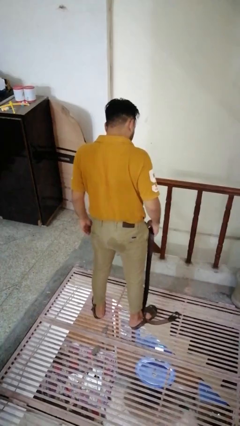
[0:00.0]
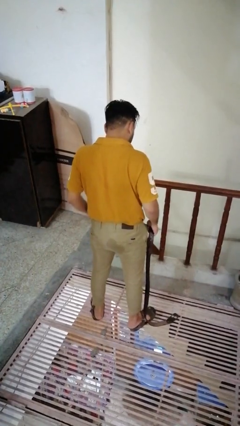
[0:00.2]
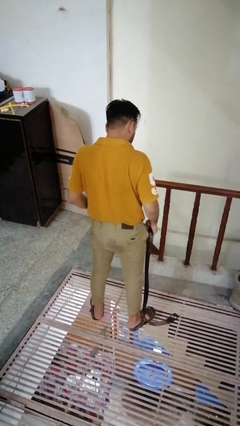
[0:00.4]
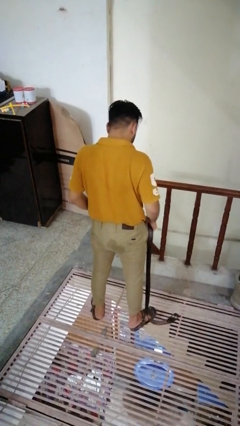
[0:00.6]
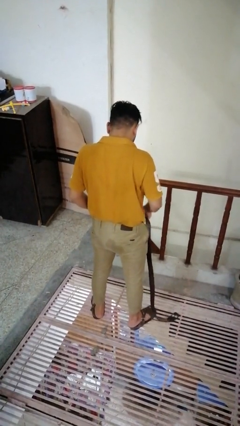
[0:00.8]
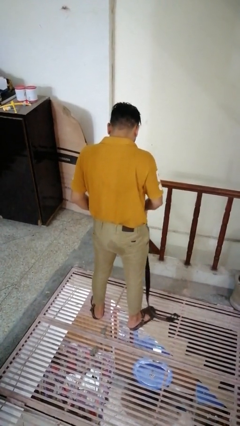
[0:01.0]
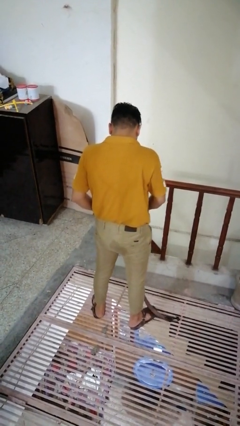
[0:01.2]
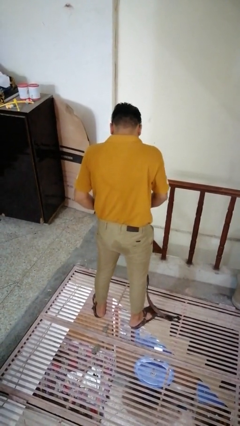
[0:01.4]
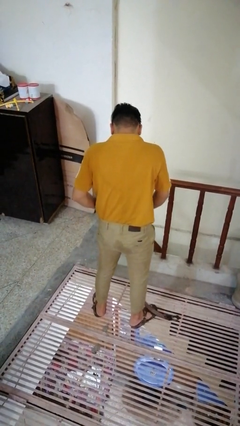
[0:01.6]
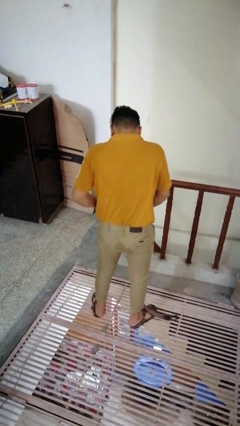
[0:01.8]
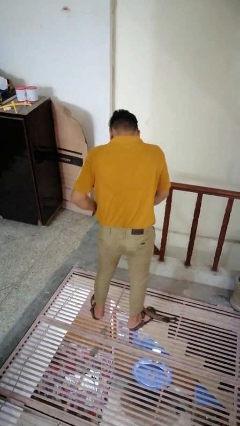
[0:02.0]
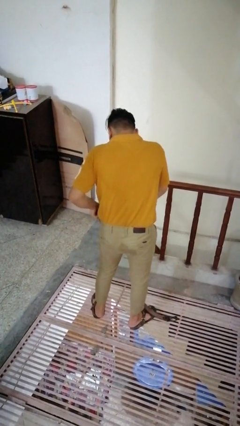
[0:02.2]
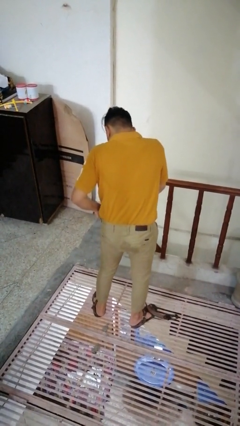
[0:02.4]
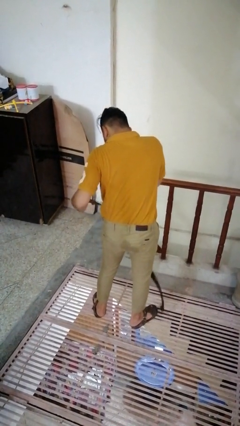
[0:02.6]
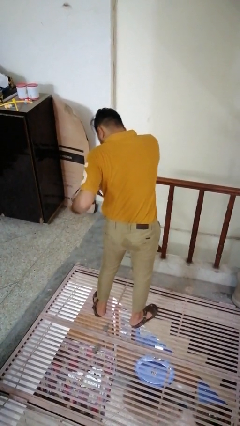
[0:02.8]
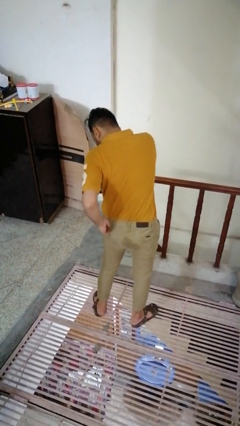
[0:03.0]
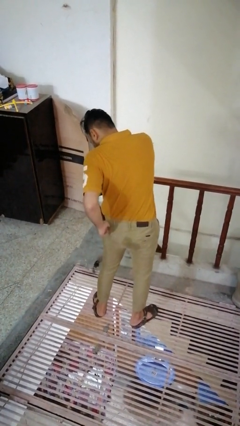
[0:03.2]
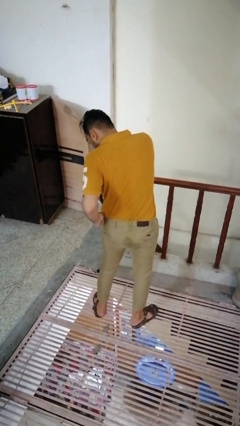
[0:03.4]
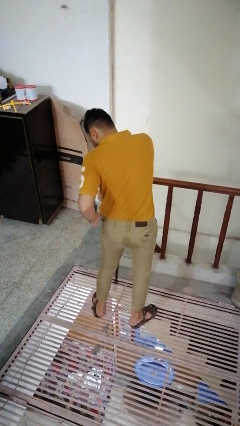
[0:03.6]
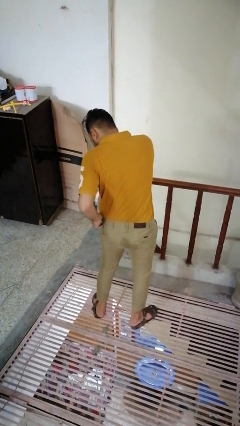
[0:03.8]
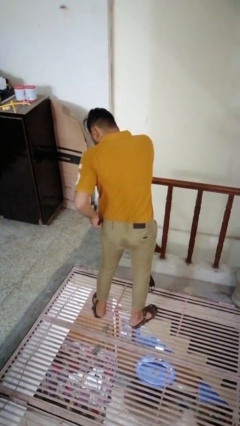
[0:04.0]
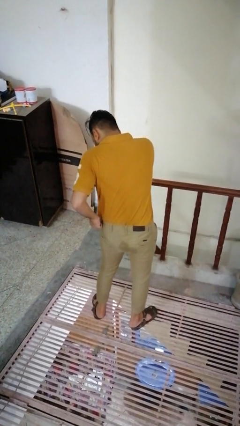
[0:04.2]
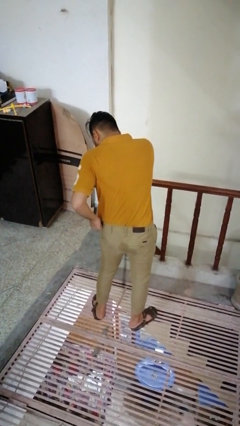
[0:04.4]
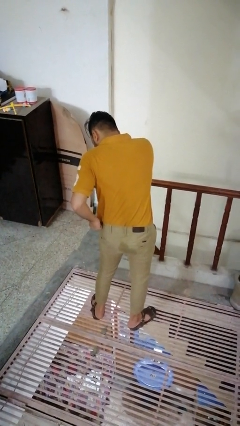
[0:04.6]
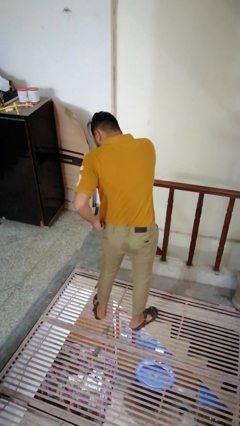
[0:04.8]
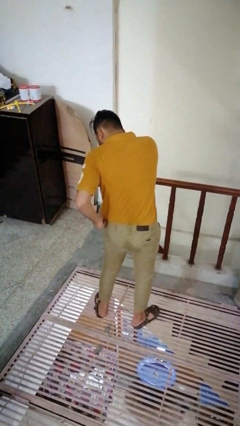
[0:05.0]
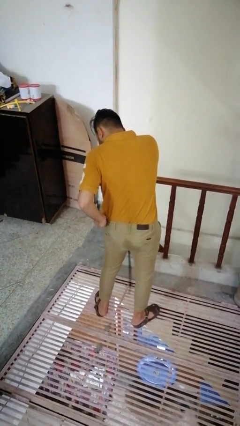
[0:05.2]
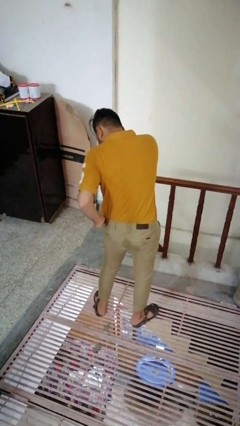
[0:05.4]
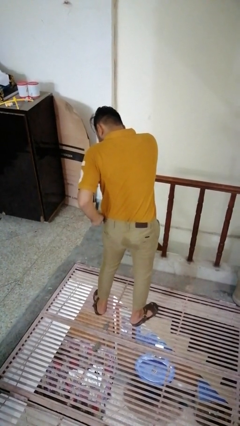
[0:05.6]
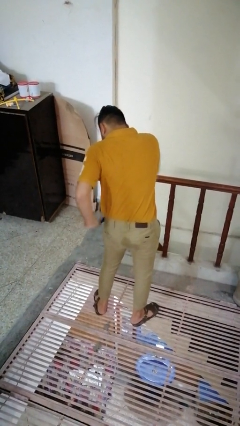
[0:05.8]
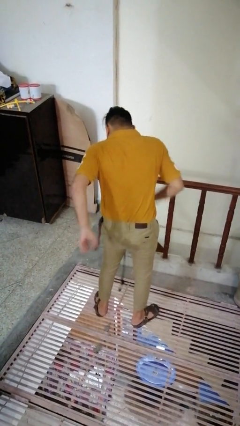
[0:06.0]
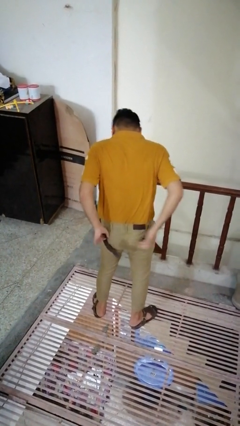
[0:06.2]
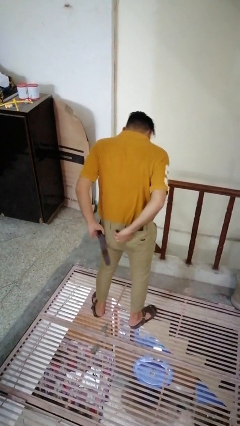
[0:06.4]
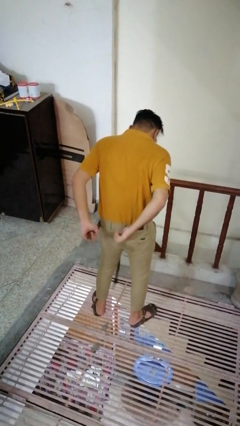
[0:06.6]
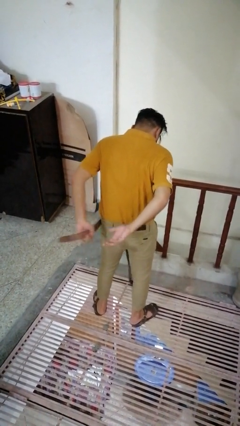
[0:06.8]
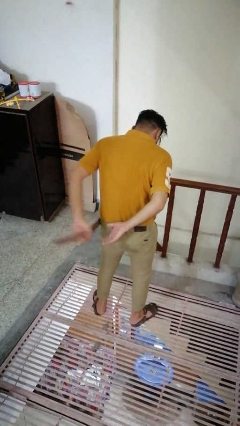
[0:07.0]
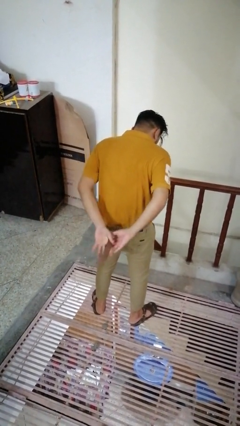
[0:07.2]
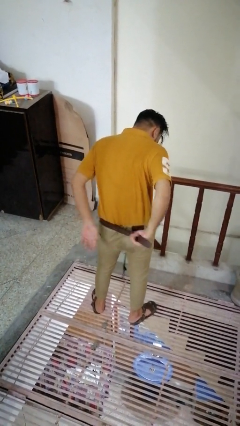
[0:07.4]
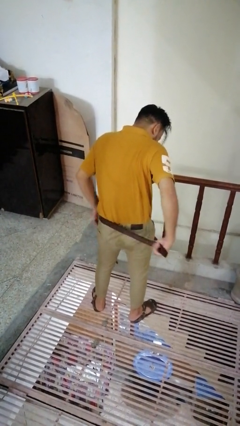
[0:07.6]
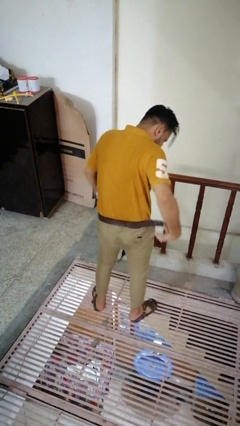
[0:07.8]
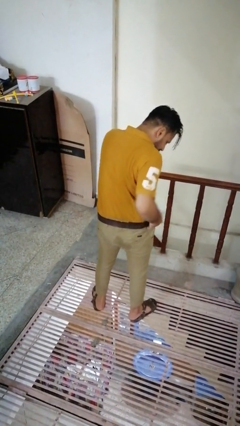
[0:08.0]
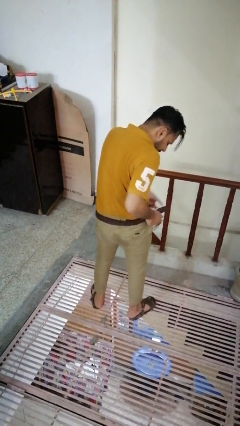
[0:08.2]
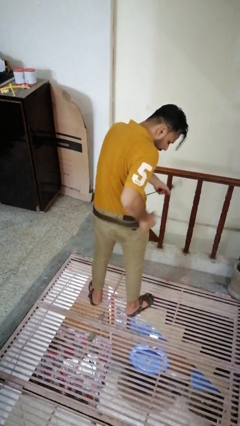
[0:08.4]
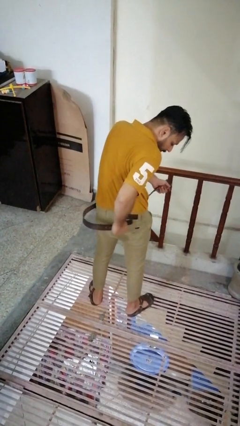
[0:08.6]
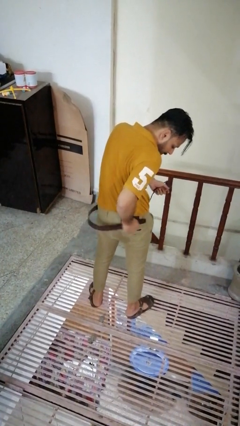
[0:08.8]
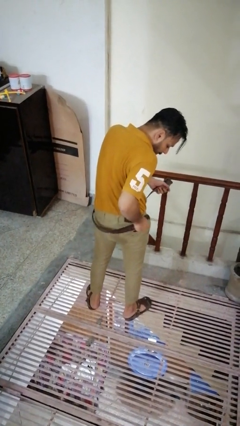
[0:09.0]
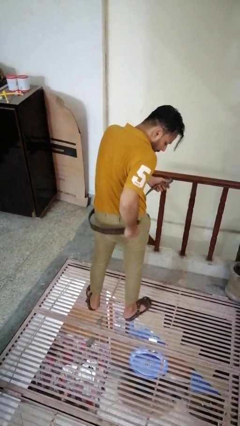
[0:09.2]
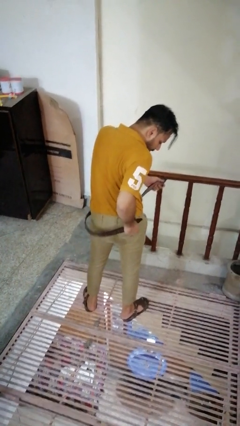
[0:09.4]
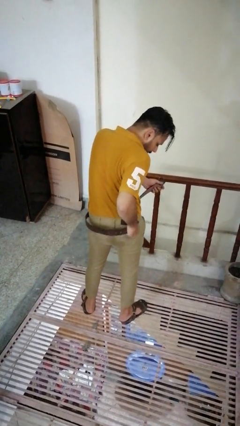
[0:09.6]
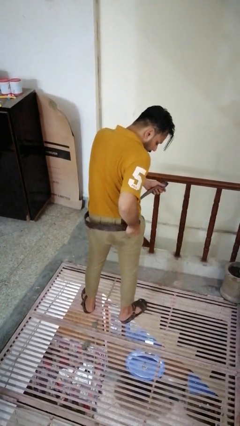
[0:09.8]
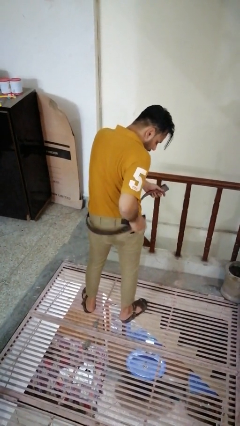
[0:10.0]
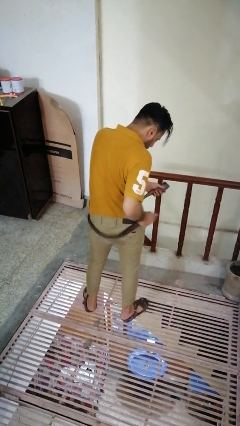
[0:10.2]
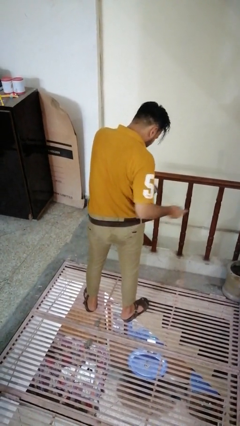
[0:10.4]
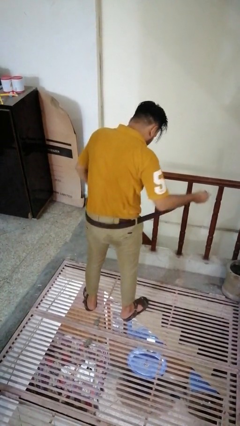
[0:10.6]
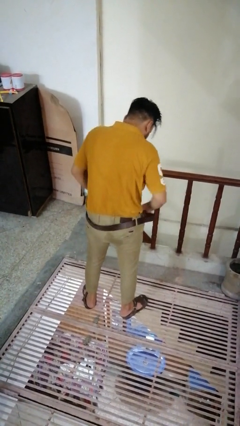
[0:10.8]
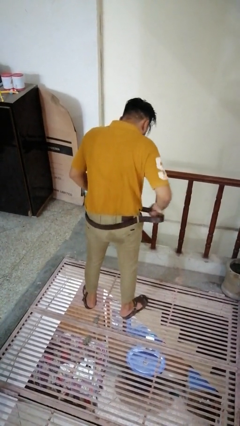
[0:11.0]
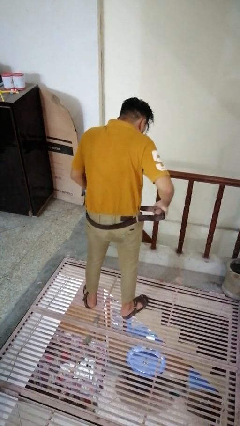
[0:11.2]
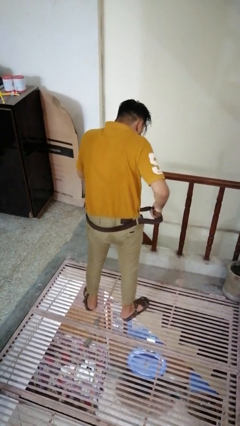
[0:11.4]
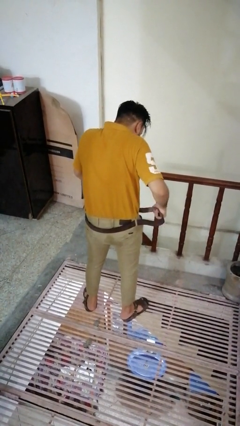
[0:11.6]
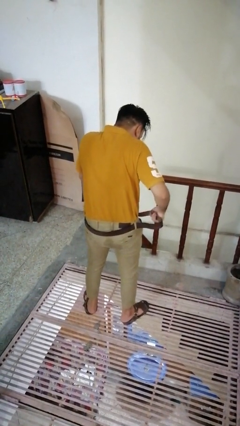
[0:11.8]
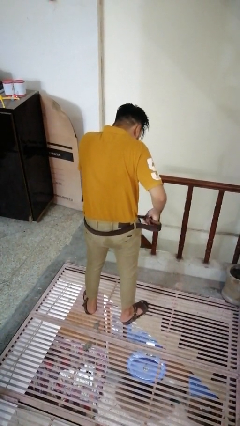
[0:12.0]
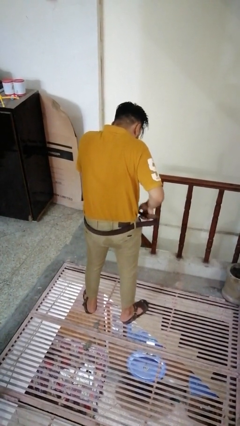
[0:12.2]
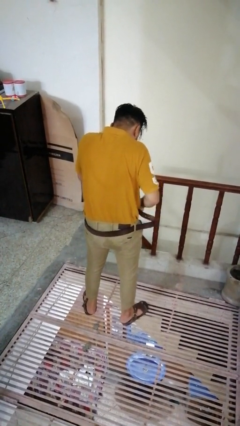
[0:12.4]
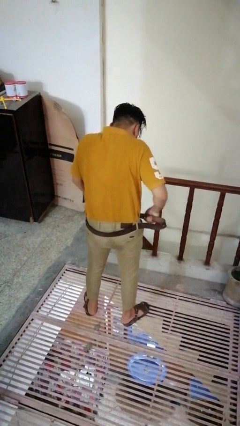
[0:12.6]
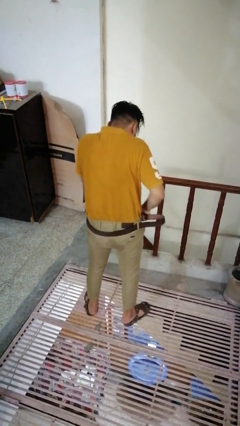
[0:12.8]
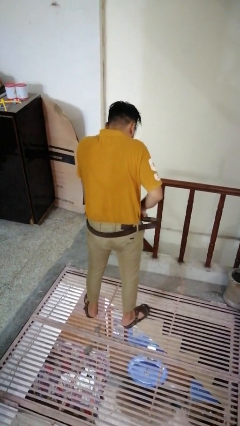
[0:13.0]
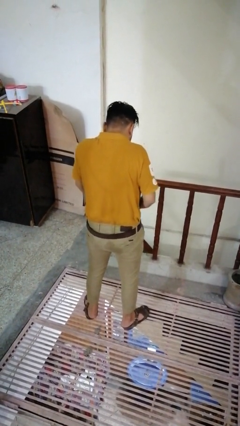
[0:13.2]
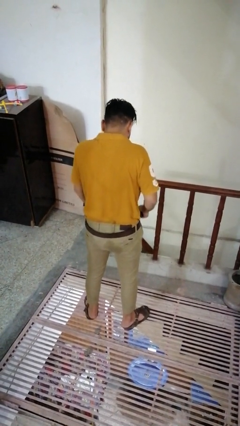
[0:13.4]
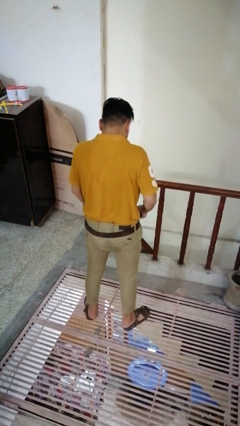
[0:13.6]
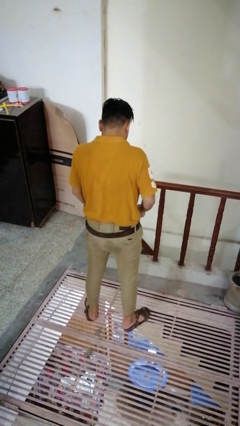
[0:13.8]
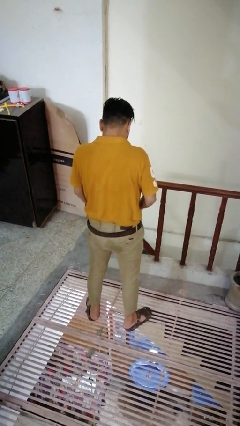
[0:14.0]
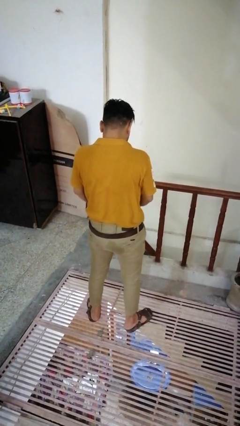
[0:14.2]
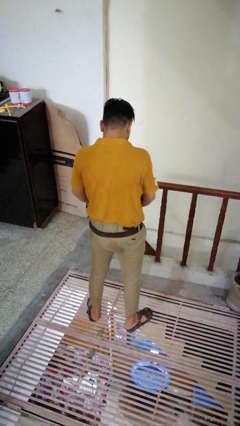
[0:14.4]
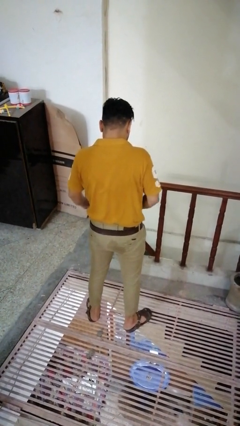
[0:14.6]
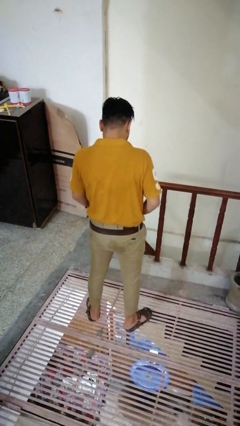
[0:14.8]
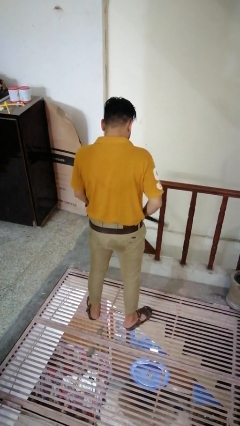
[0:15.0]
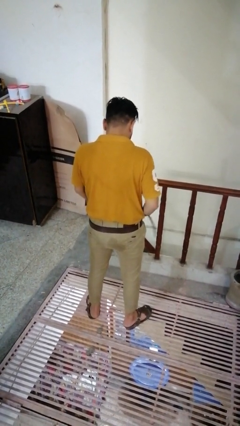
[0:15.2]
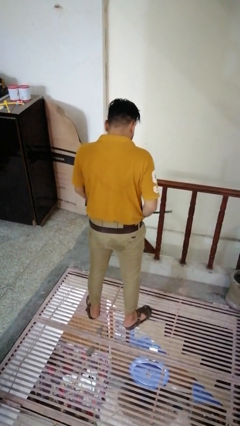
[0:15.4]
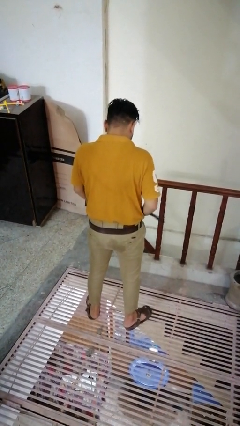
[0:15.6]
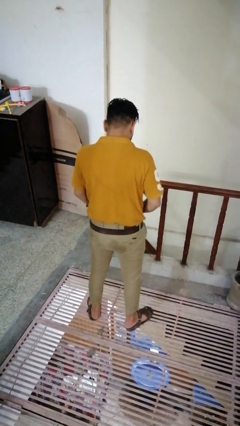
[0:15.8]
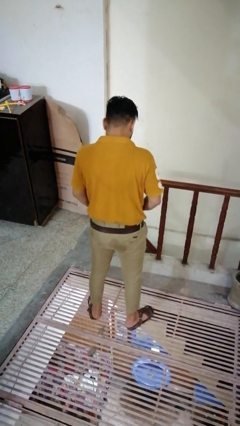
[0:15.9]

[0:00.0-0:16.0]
person puts on belt

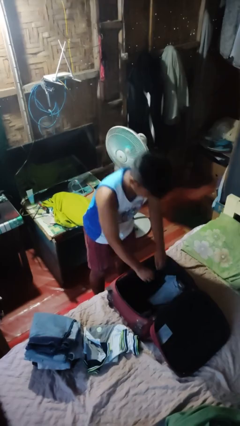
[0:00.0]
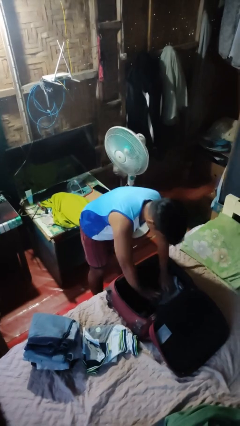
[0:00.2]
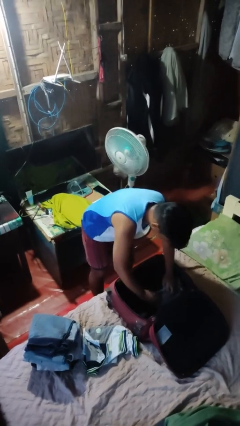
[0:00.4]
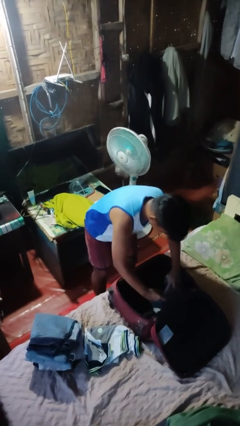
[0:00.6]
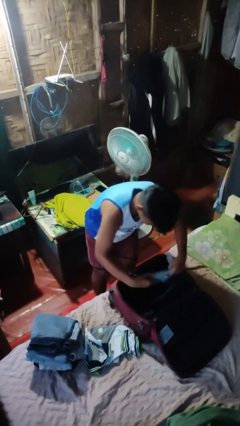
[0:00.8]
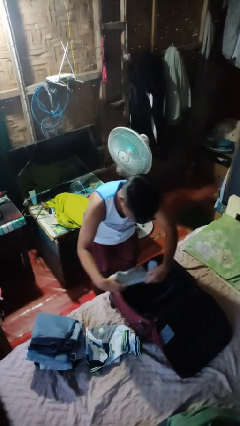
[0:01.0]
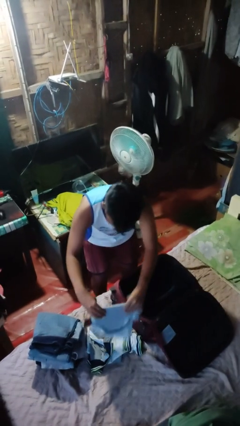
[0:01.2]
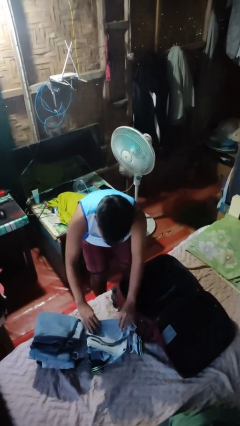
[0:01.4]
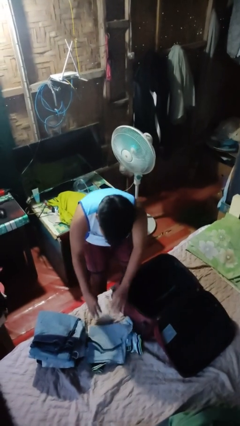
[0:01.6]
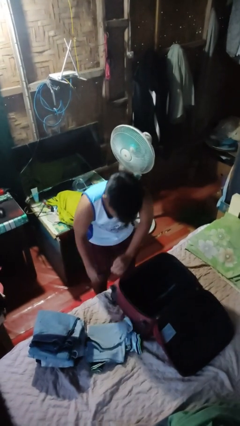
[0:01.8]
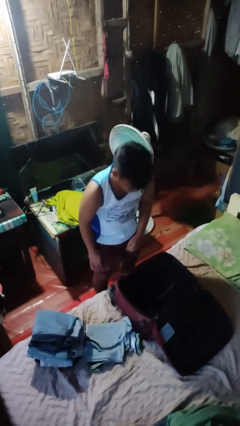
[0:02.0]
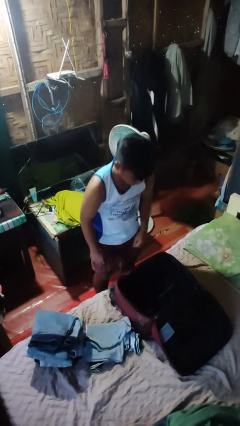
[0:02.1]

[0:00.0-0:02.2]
person unloads clothes from suitcase
